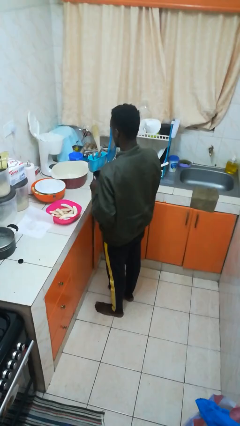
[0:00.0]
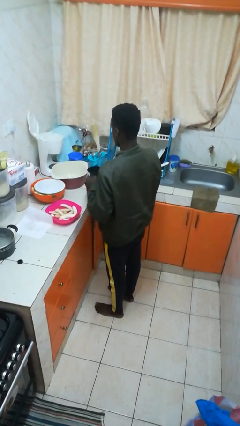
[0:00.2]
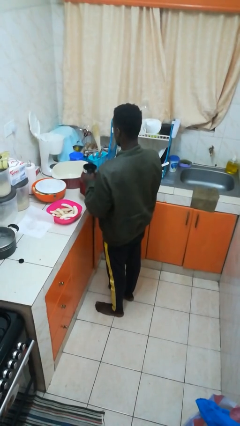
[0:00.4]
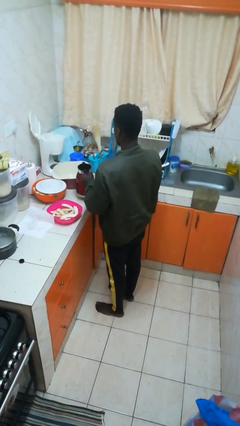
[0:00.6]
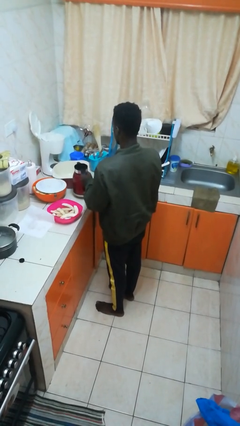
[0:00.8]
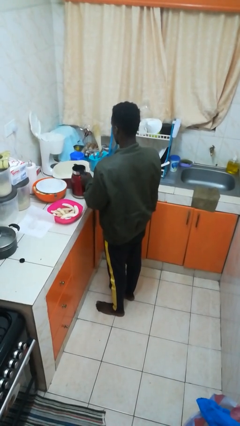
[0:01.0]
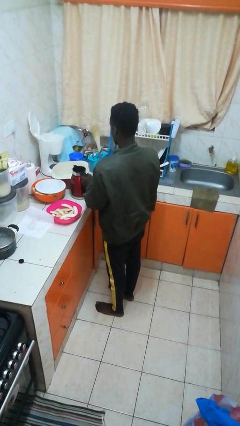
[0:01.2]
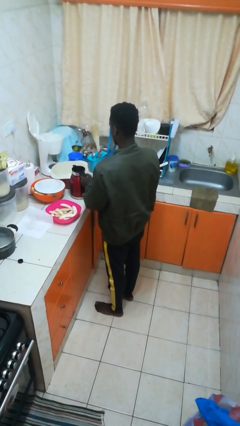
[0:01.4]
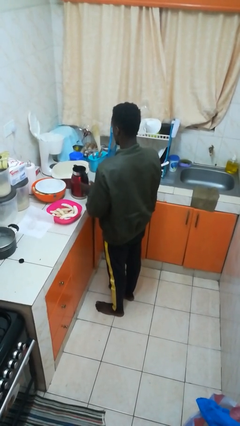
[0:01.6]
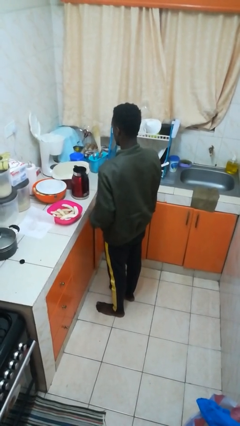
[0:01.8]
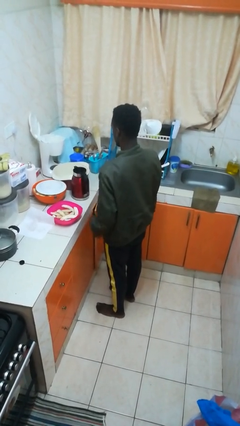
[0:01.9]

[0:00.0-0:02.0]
person puts down object on countertop

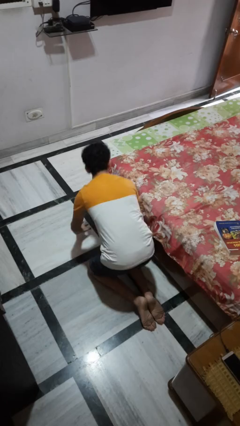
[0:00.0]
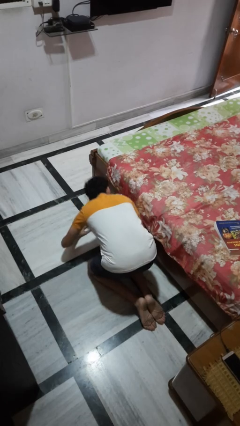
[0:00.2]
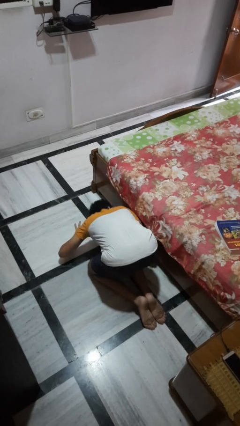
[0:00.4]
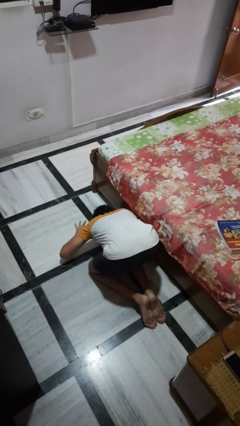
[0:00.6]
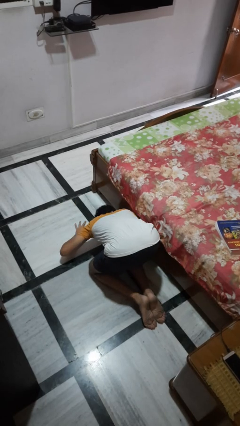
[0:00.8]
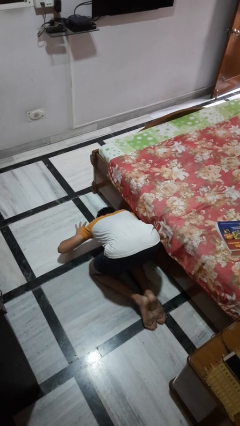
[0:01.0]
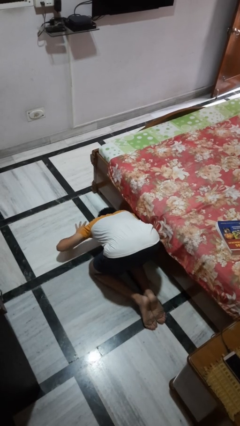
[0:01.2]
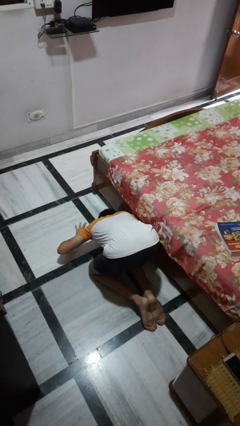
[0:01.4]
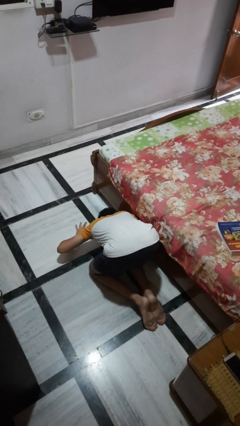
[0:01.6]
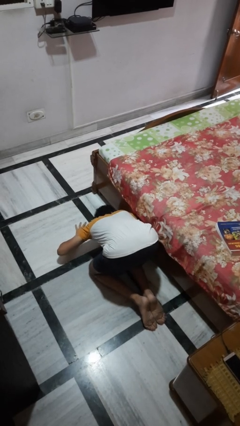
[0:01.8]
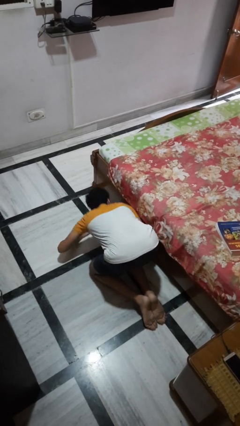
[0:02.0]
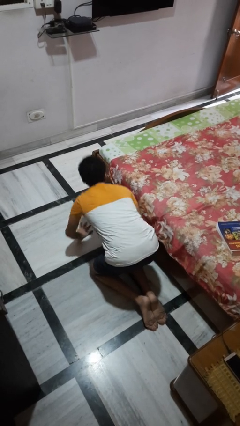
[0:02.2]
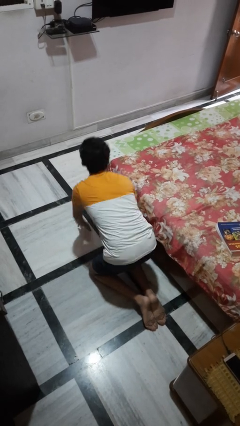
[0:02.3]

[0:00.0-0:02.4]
person searches under bed

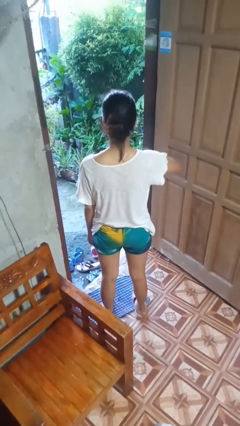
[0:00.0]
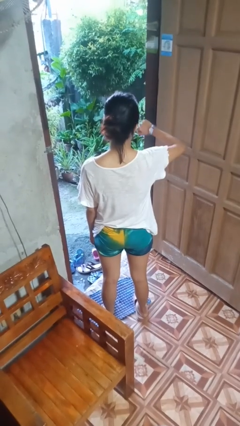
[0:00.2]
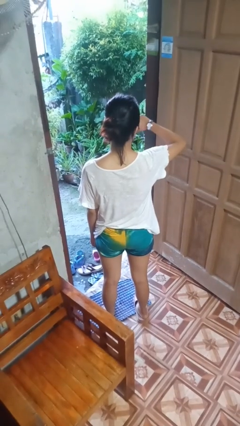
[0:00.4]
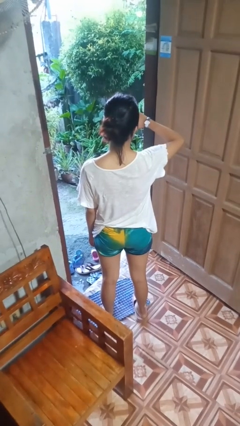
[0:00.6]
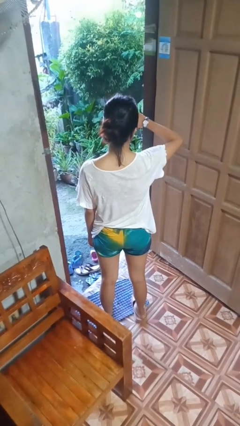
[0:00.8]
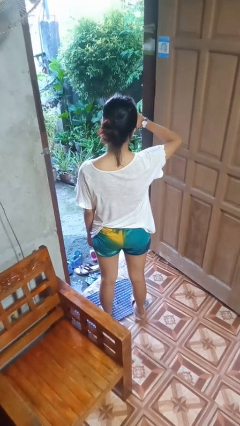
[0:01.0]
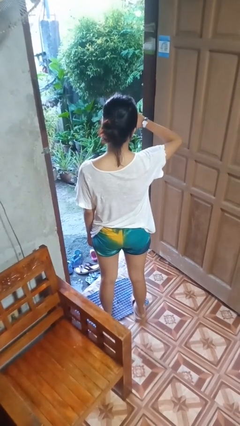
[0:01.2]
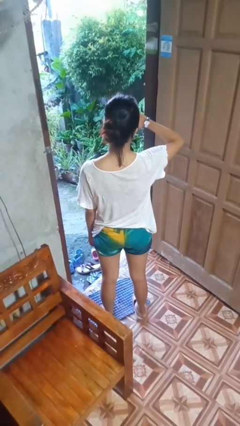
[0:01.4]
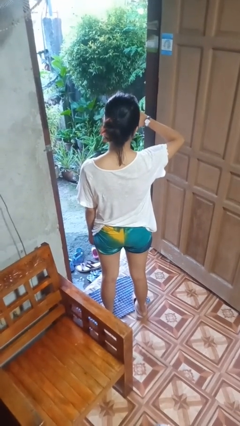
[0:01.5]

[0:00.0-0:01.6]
person looks at wristwatch

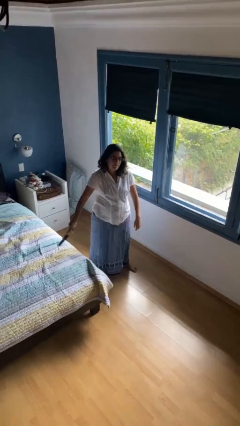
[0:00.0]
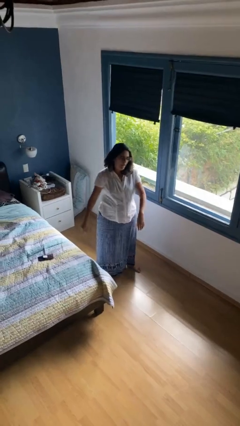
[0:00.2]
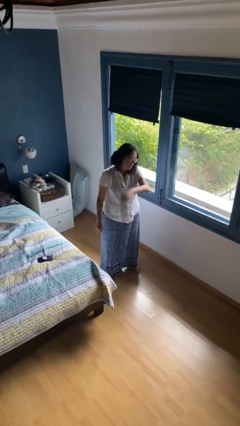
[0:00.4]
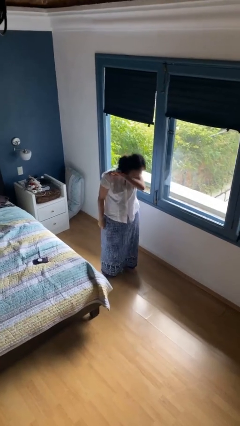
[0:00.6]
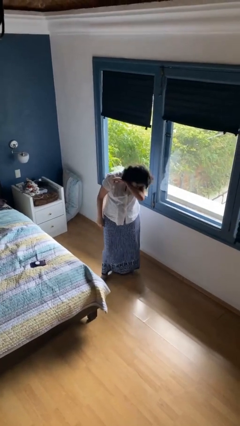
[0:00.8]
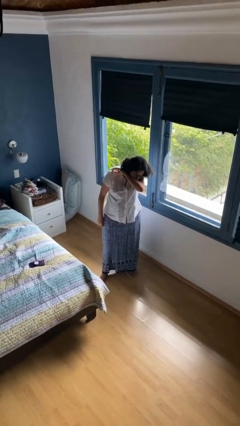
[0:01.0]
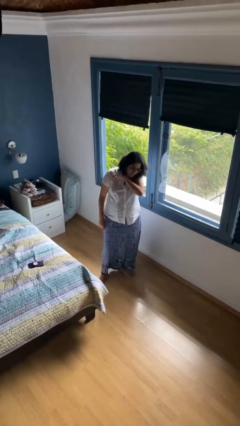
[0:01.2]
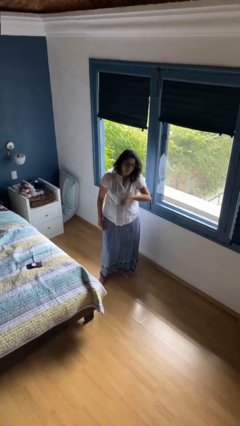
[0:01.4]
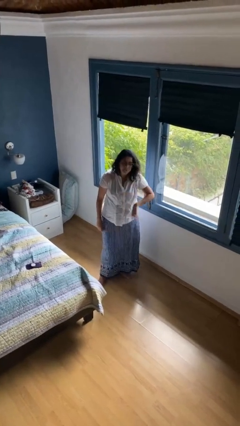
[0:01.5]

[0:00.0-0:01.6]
person sneezes into arm

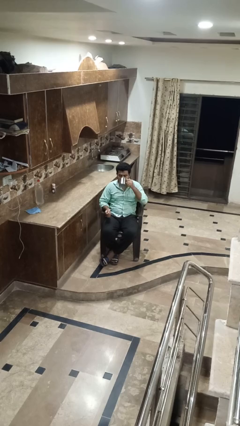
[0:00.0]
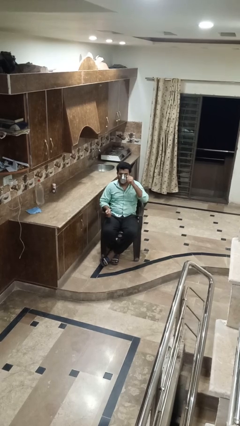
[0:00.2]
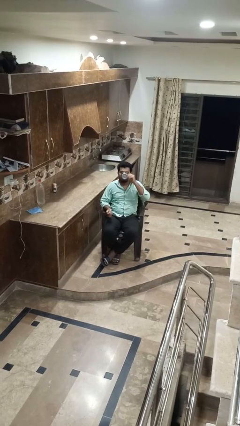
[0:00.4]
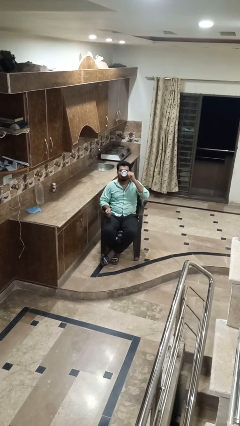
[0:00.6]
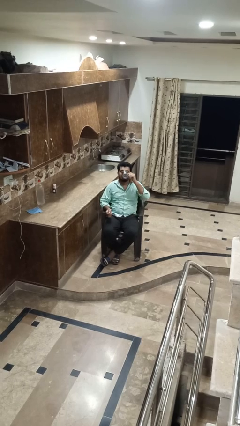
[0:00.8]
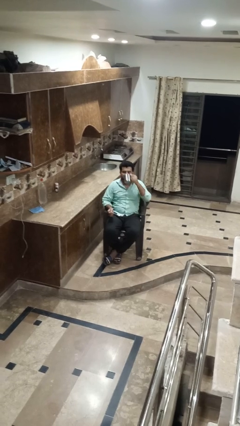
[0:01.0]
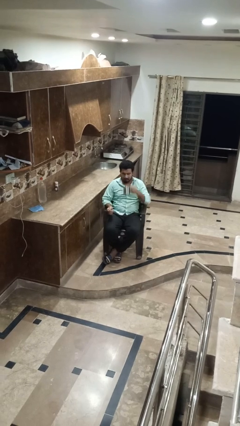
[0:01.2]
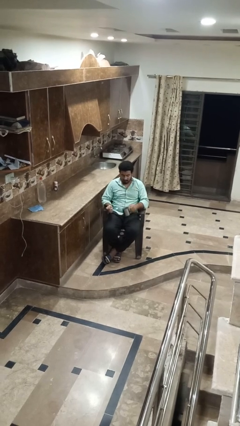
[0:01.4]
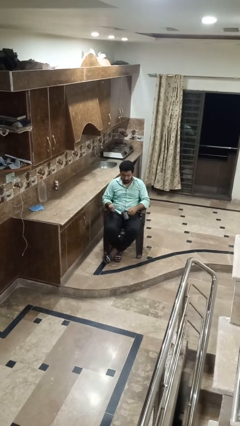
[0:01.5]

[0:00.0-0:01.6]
person drinks from mug

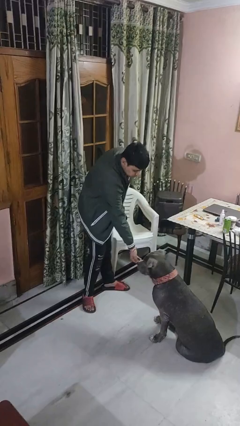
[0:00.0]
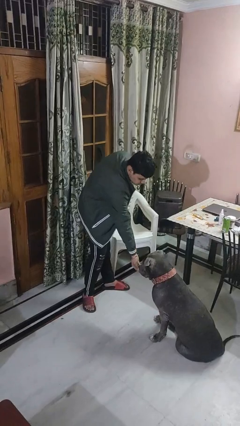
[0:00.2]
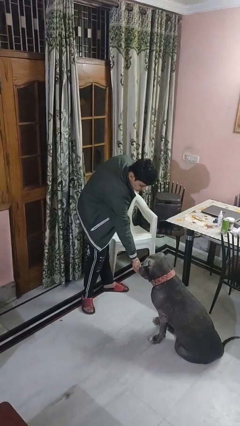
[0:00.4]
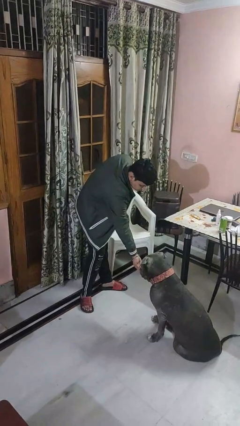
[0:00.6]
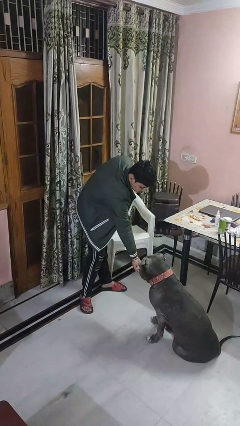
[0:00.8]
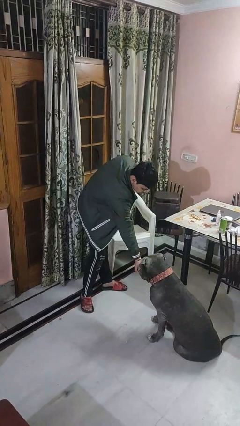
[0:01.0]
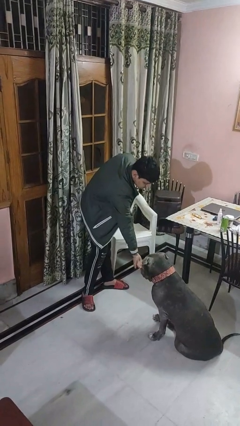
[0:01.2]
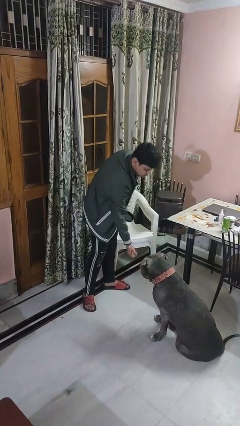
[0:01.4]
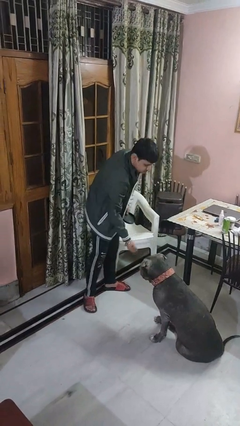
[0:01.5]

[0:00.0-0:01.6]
person feeds dog

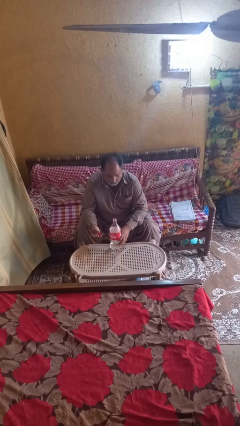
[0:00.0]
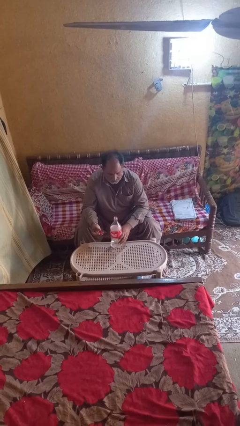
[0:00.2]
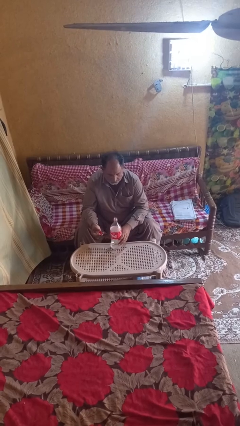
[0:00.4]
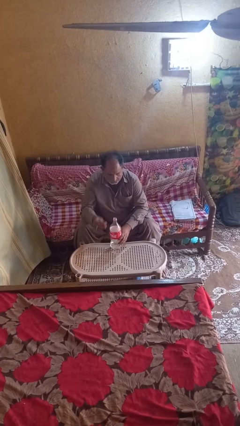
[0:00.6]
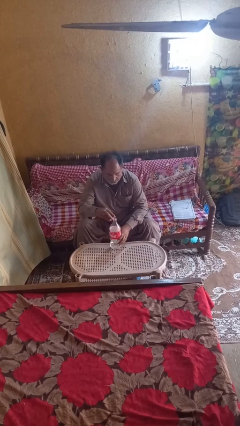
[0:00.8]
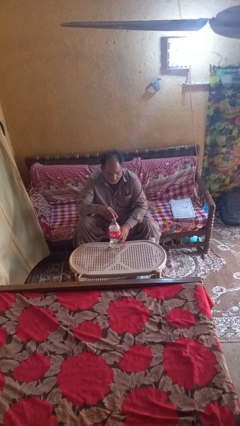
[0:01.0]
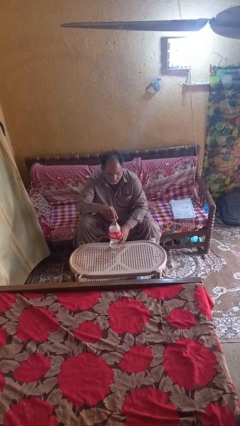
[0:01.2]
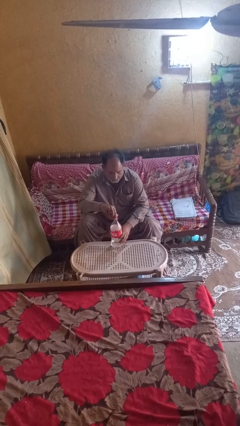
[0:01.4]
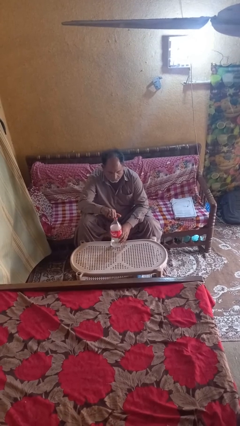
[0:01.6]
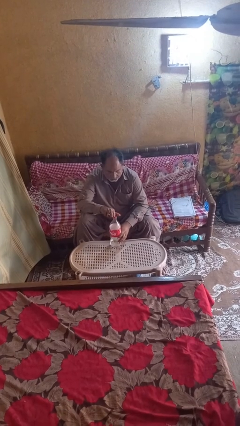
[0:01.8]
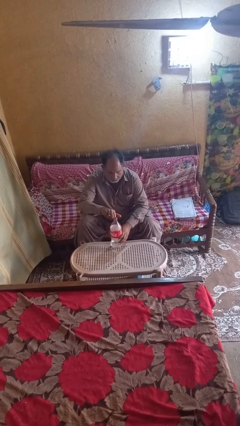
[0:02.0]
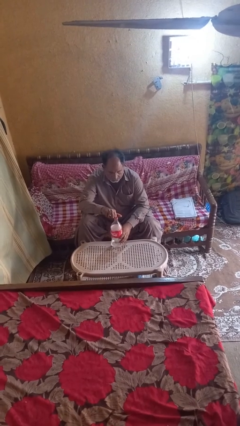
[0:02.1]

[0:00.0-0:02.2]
person screws lid to bottle

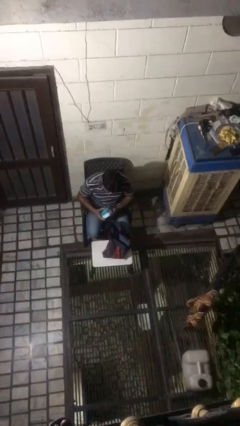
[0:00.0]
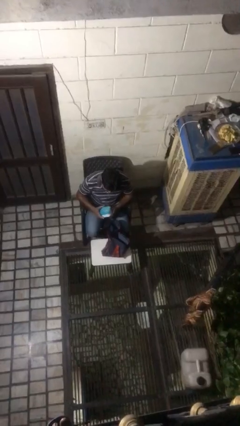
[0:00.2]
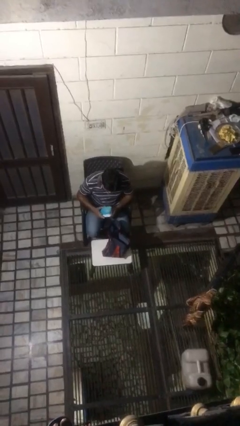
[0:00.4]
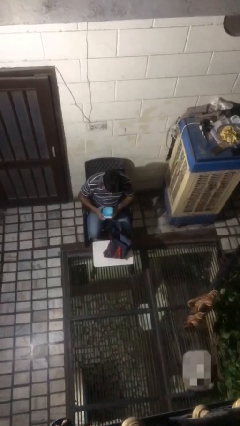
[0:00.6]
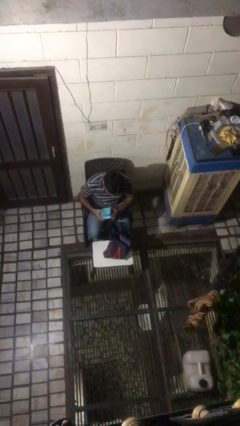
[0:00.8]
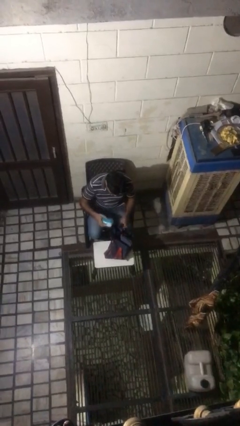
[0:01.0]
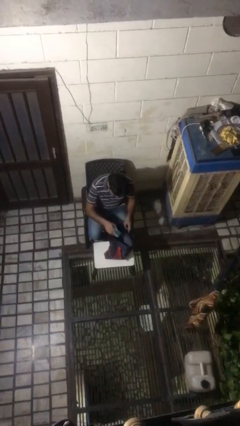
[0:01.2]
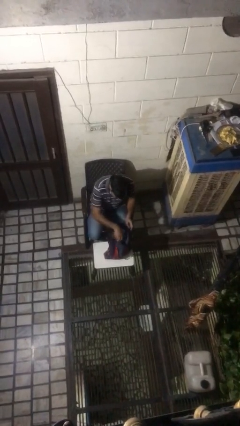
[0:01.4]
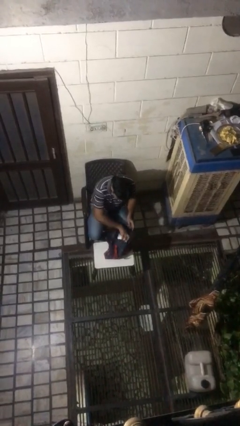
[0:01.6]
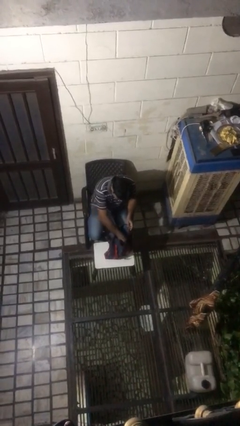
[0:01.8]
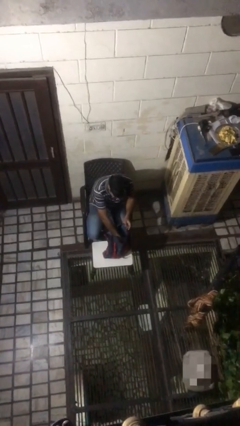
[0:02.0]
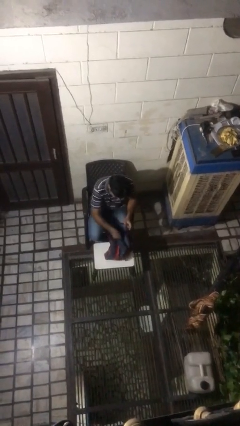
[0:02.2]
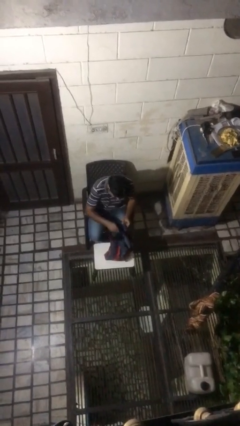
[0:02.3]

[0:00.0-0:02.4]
person puts object into bag

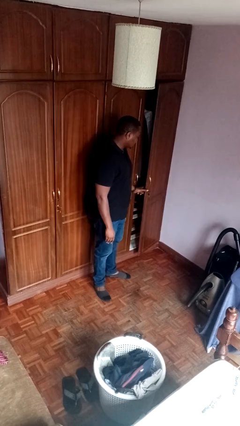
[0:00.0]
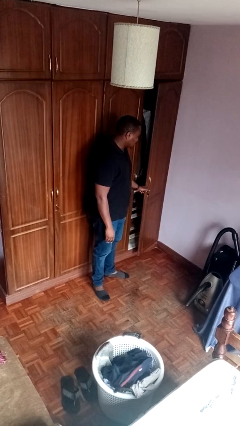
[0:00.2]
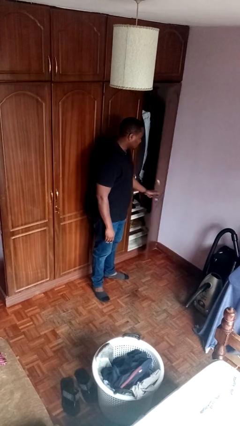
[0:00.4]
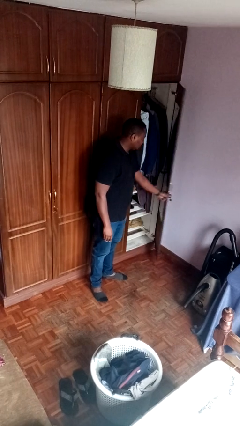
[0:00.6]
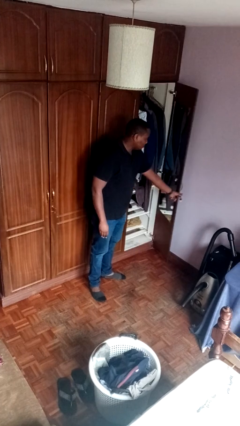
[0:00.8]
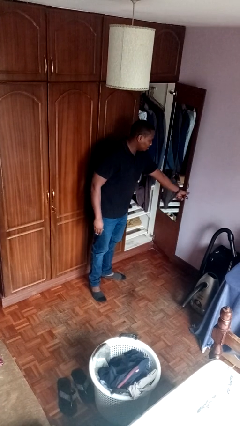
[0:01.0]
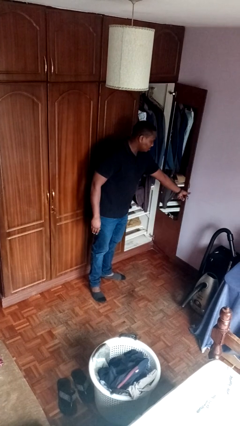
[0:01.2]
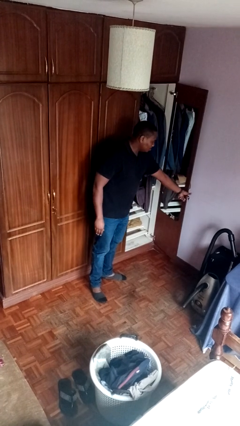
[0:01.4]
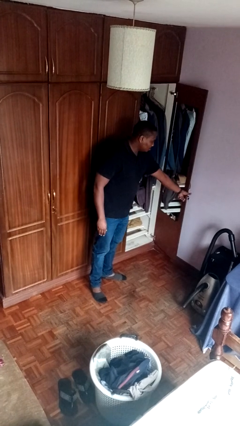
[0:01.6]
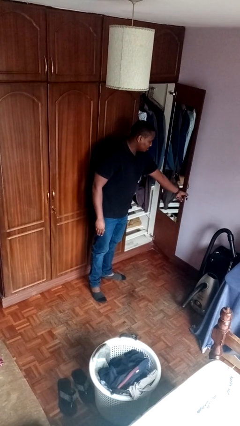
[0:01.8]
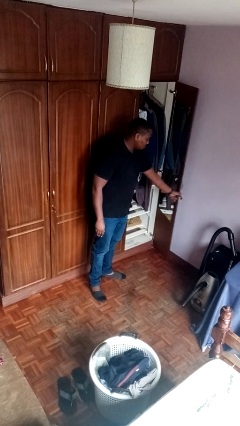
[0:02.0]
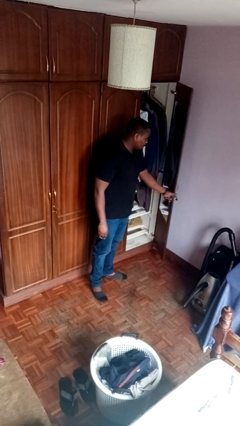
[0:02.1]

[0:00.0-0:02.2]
person opens closet door
